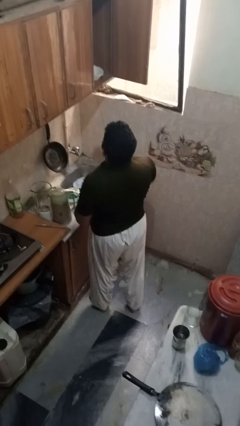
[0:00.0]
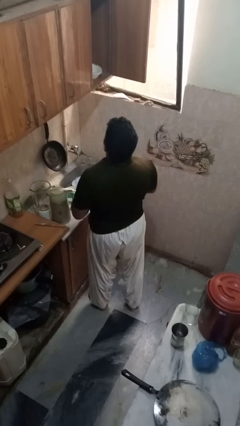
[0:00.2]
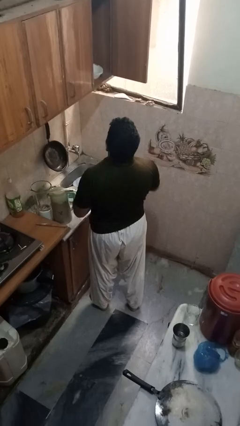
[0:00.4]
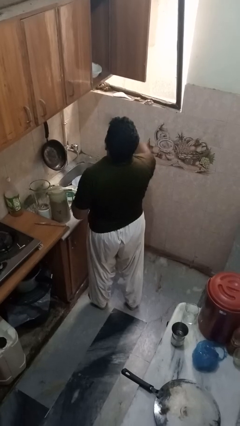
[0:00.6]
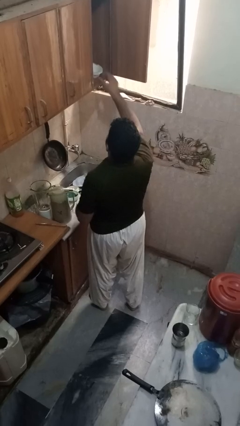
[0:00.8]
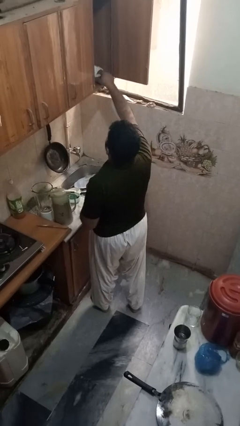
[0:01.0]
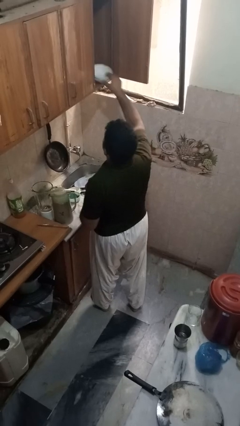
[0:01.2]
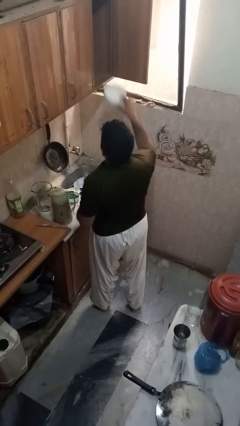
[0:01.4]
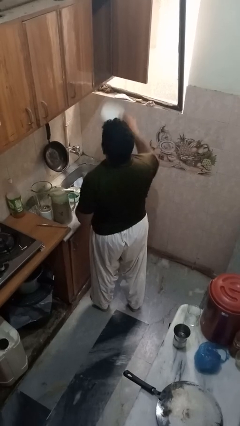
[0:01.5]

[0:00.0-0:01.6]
person takes object from cabinet

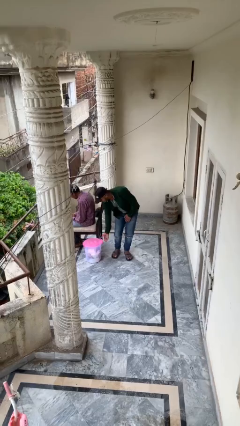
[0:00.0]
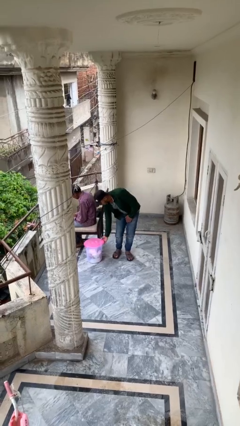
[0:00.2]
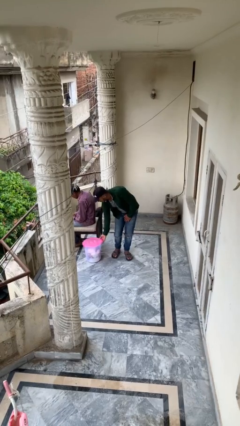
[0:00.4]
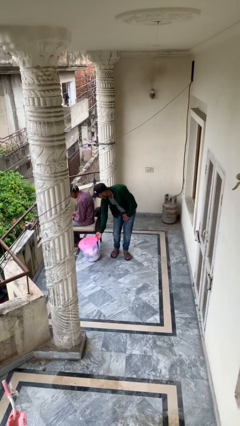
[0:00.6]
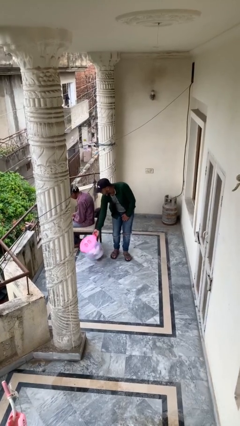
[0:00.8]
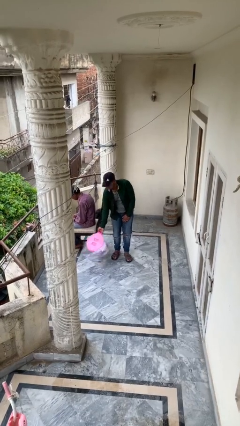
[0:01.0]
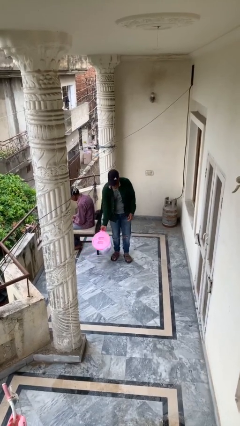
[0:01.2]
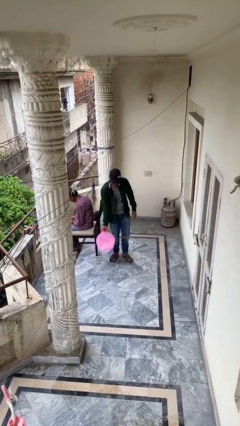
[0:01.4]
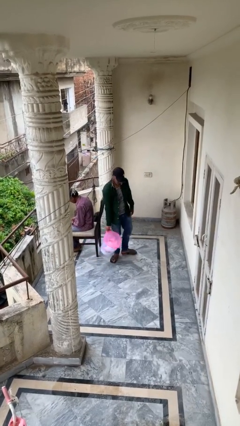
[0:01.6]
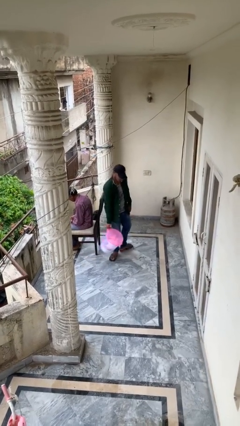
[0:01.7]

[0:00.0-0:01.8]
person steals object from person

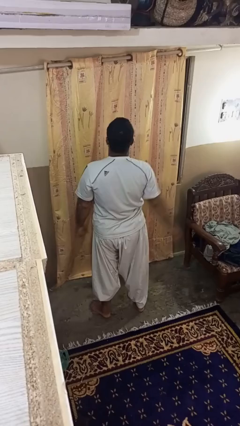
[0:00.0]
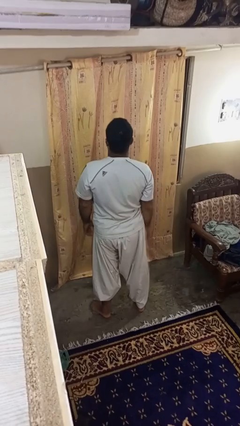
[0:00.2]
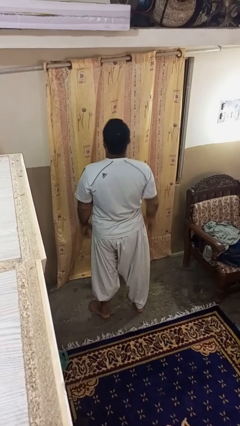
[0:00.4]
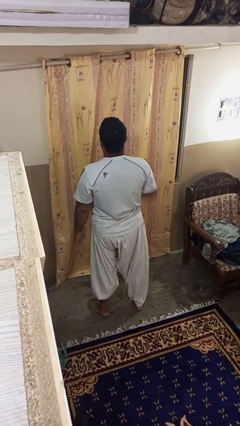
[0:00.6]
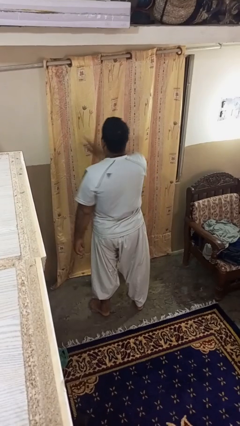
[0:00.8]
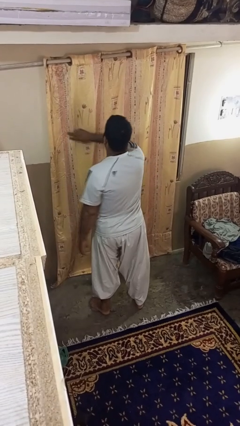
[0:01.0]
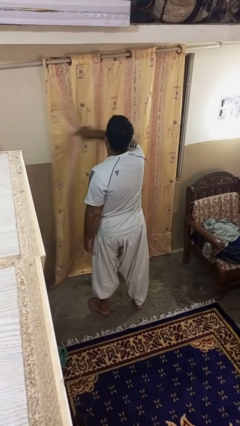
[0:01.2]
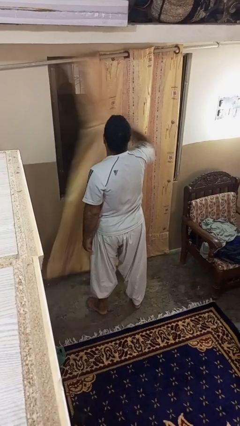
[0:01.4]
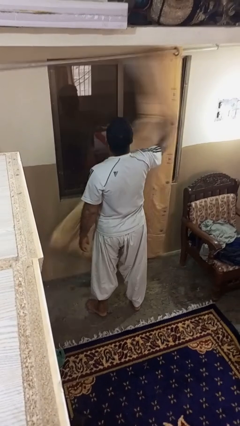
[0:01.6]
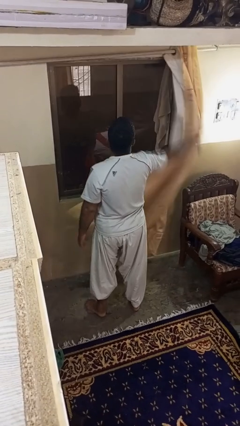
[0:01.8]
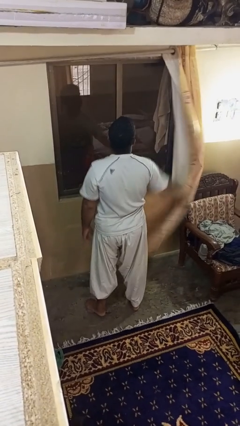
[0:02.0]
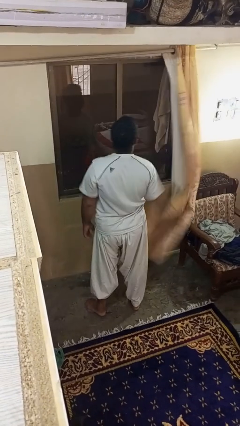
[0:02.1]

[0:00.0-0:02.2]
person opens curtains

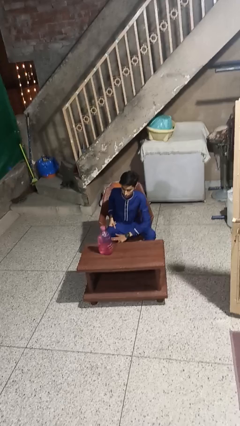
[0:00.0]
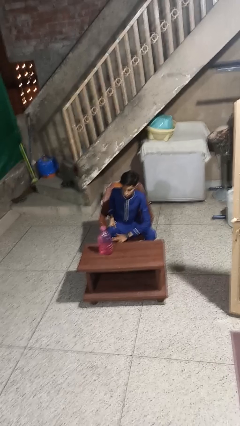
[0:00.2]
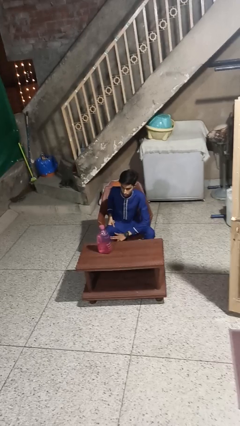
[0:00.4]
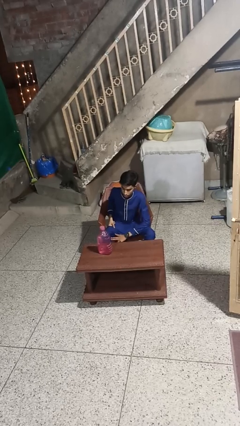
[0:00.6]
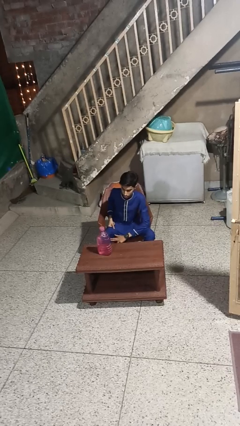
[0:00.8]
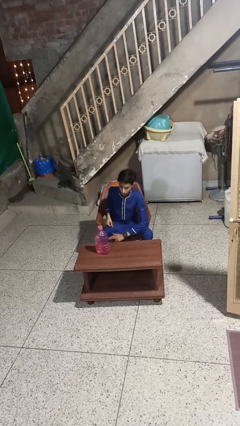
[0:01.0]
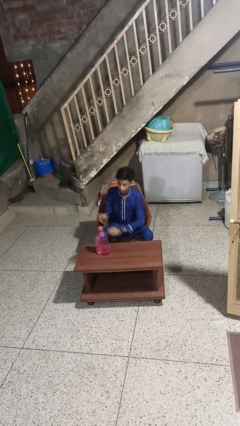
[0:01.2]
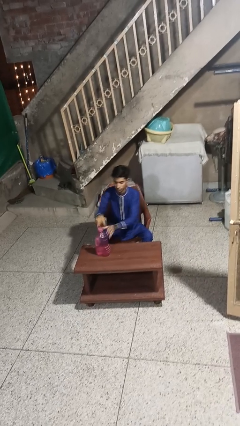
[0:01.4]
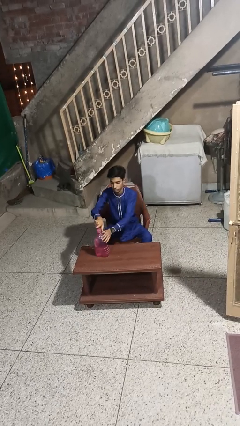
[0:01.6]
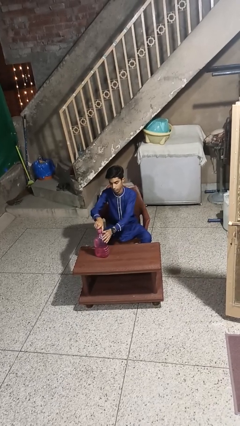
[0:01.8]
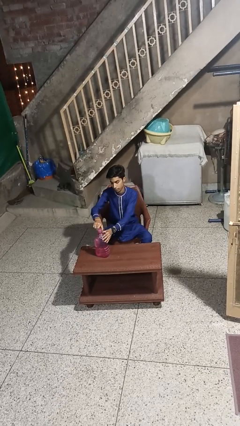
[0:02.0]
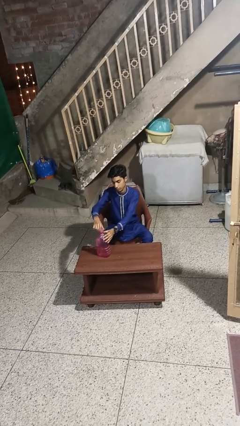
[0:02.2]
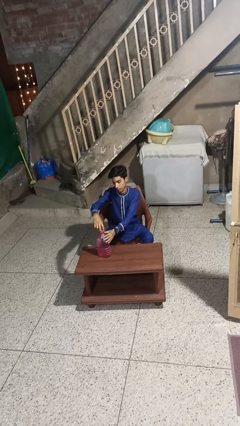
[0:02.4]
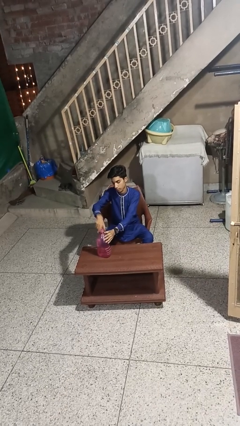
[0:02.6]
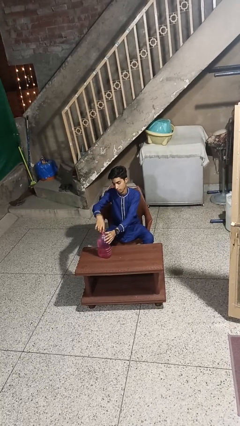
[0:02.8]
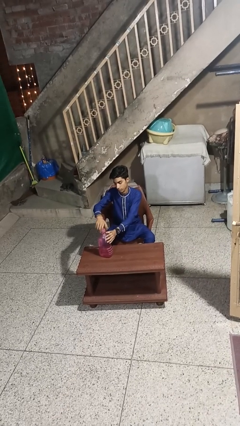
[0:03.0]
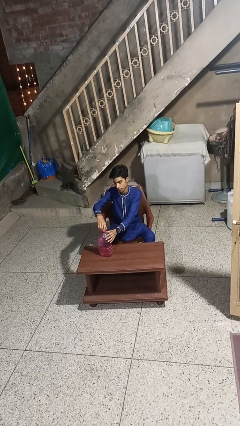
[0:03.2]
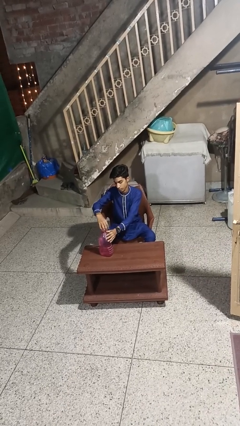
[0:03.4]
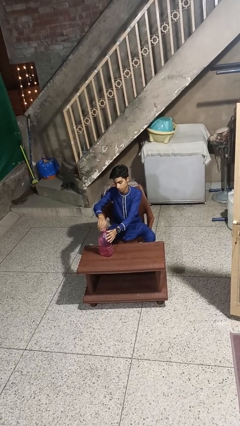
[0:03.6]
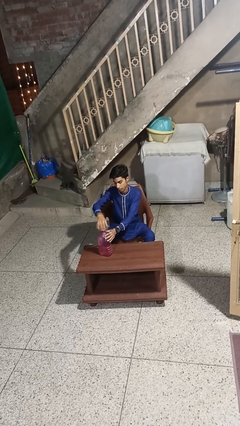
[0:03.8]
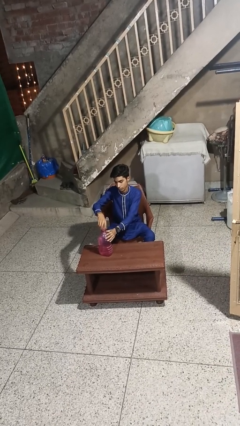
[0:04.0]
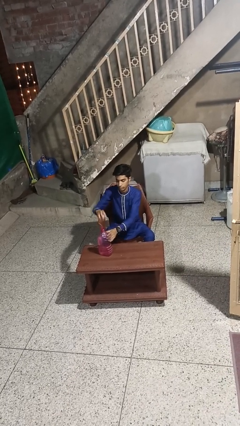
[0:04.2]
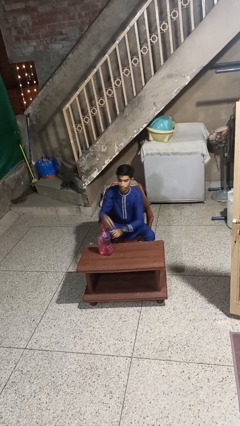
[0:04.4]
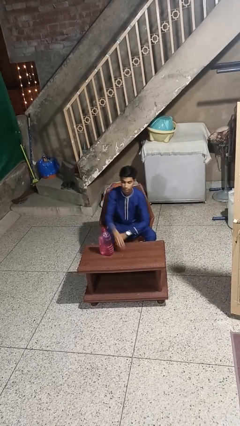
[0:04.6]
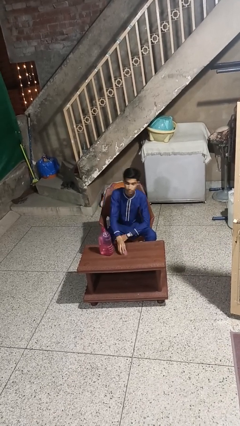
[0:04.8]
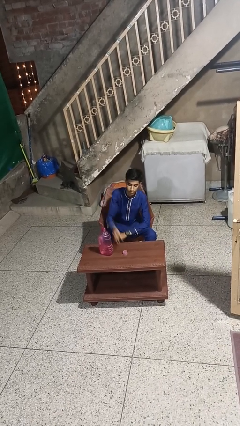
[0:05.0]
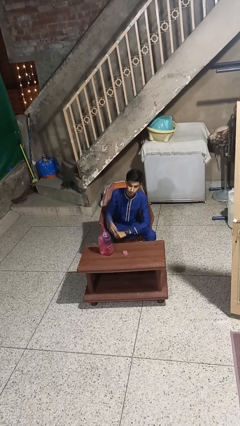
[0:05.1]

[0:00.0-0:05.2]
person unscrews lid from bottle

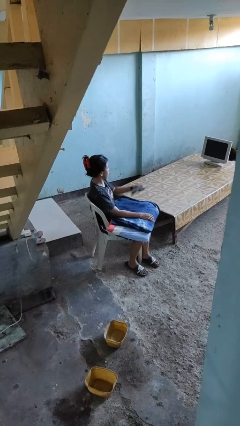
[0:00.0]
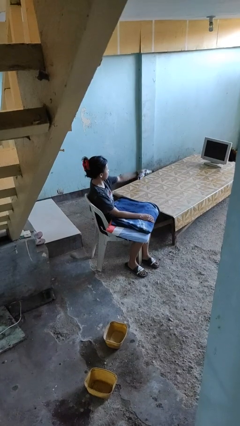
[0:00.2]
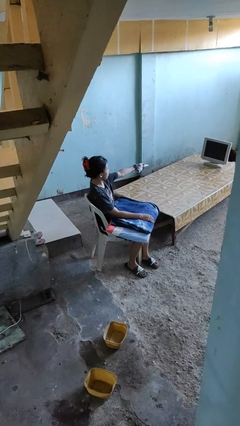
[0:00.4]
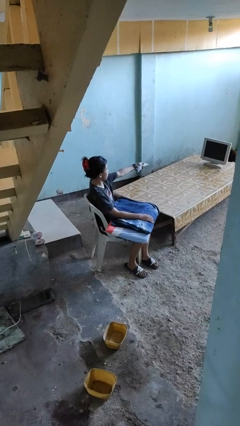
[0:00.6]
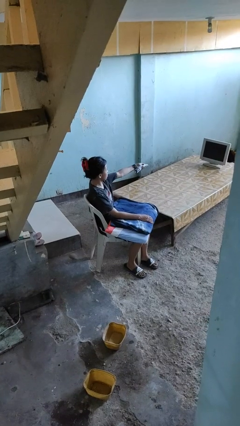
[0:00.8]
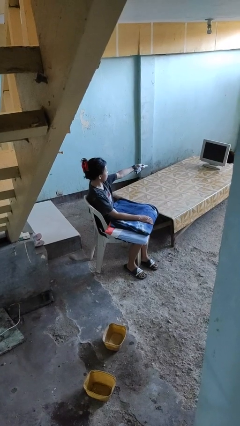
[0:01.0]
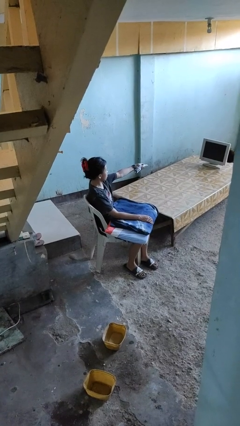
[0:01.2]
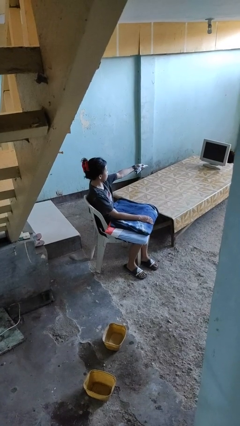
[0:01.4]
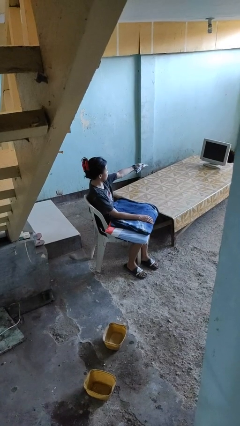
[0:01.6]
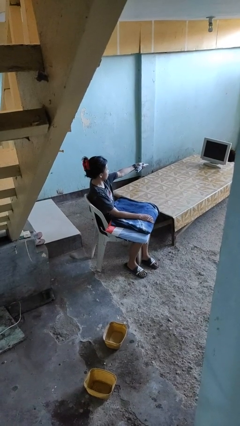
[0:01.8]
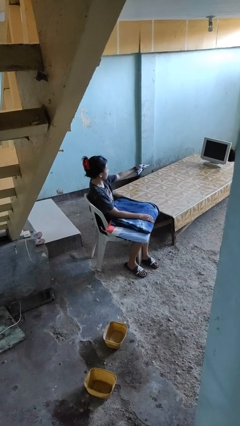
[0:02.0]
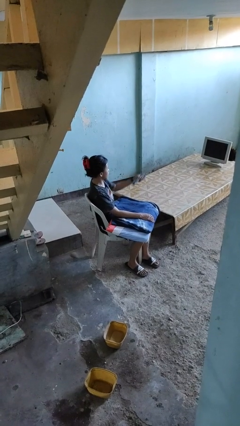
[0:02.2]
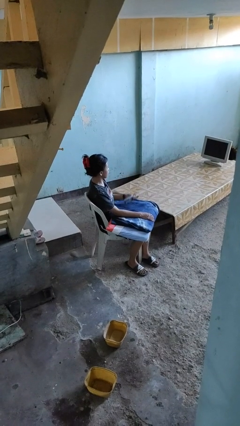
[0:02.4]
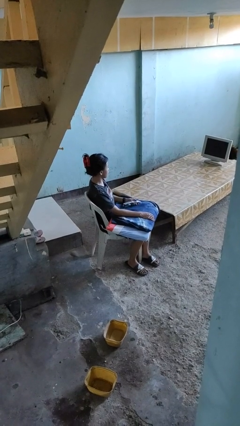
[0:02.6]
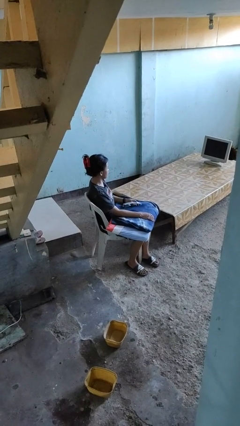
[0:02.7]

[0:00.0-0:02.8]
person uses television remote

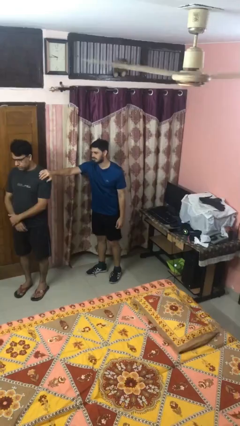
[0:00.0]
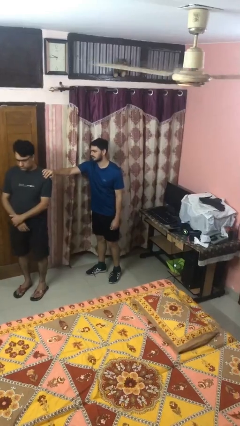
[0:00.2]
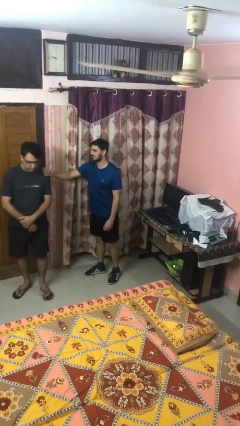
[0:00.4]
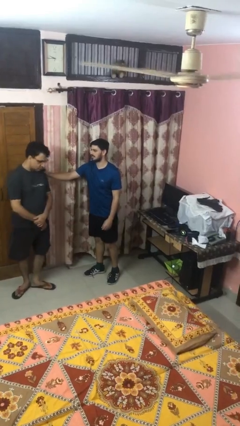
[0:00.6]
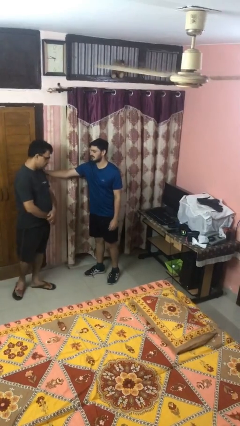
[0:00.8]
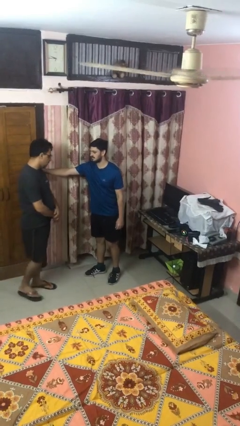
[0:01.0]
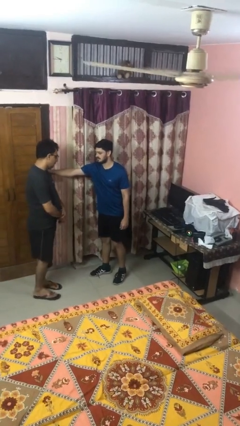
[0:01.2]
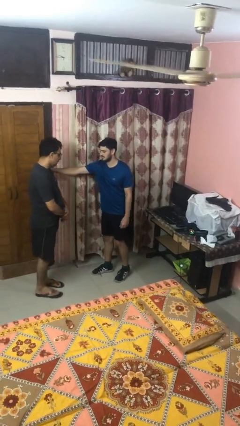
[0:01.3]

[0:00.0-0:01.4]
person spins person around

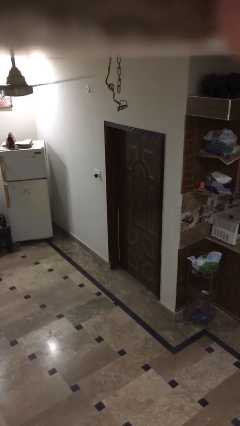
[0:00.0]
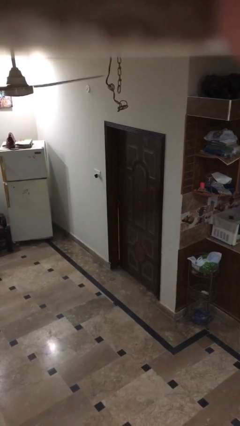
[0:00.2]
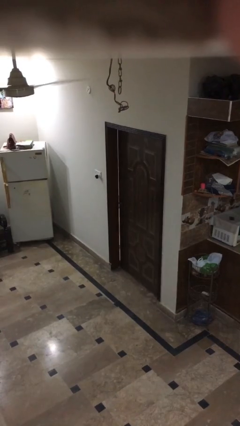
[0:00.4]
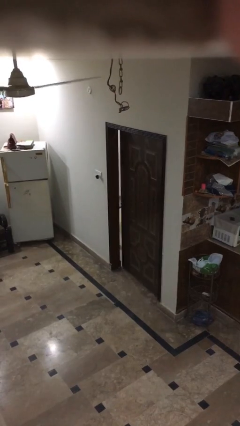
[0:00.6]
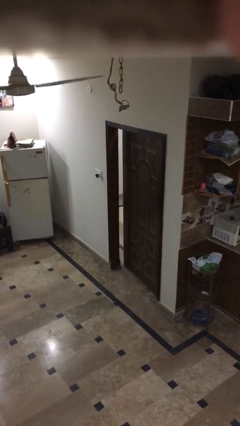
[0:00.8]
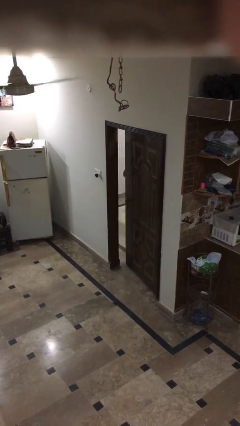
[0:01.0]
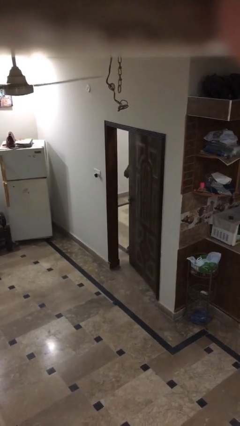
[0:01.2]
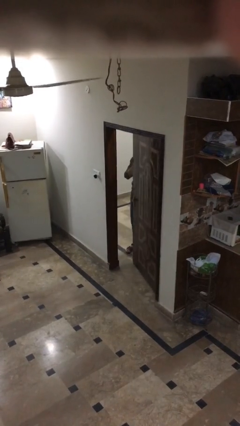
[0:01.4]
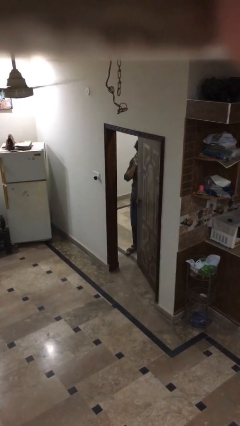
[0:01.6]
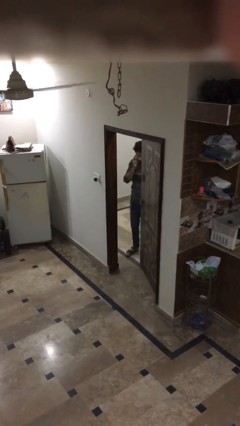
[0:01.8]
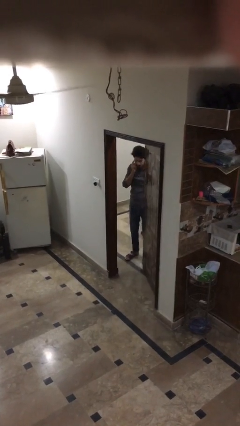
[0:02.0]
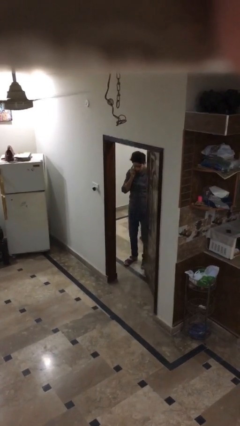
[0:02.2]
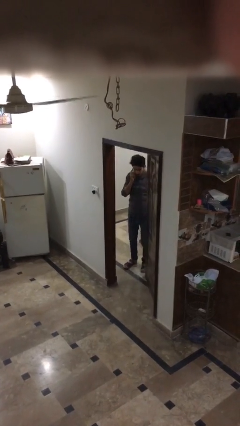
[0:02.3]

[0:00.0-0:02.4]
person opens facility door
